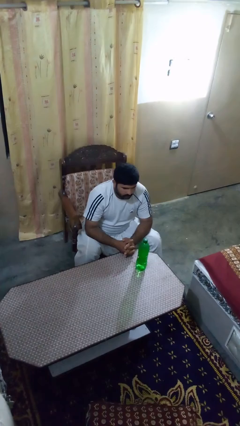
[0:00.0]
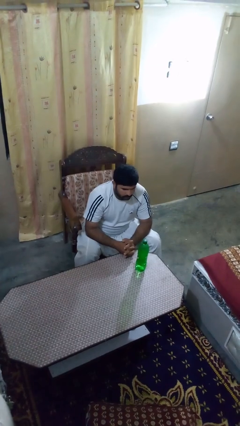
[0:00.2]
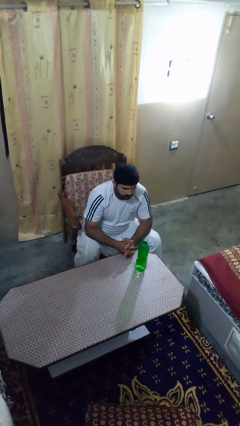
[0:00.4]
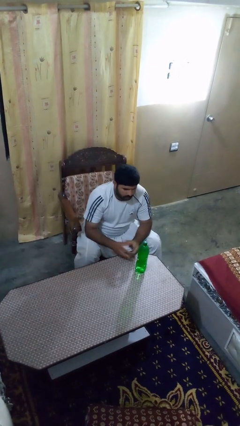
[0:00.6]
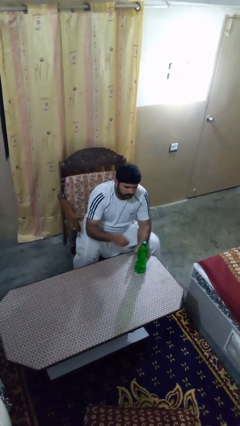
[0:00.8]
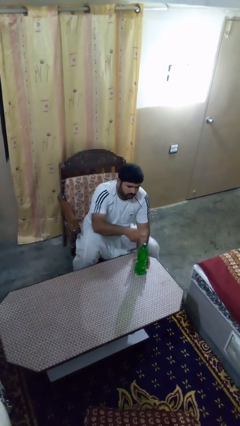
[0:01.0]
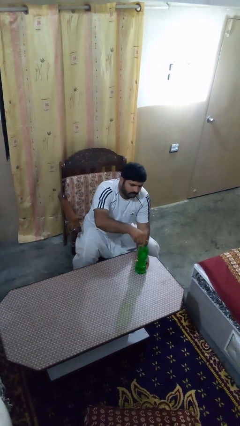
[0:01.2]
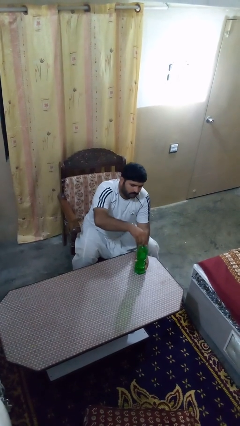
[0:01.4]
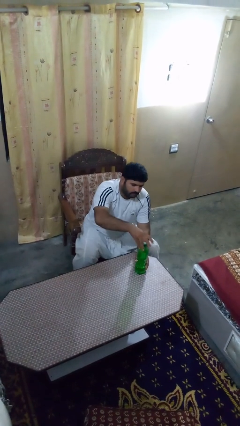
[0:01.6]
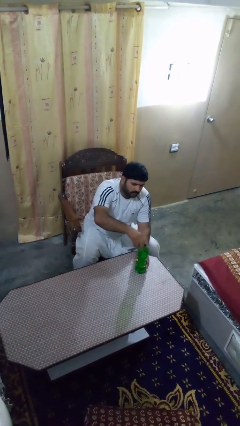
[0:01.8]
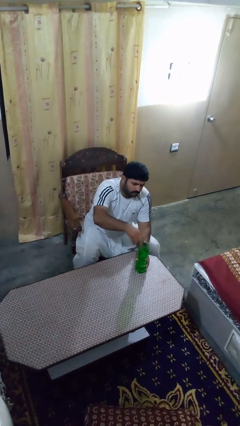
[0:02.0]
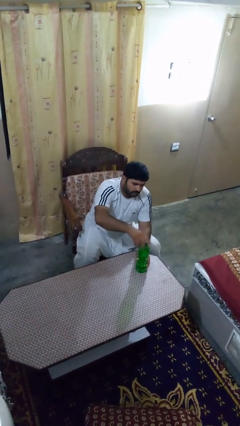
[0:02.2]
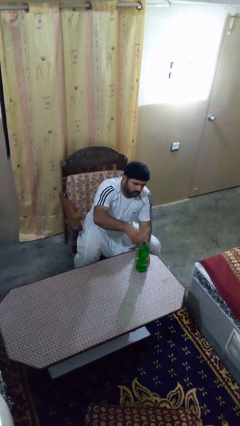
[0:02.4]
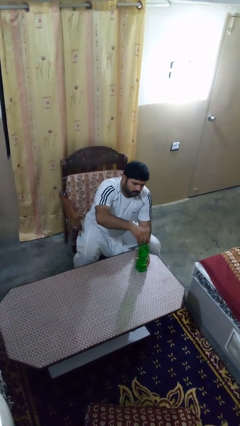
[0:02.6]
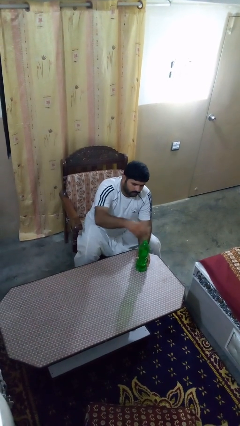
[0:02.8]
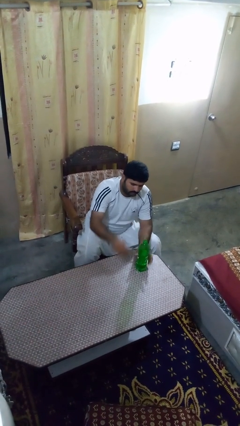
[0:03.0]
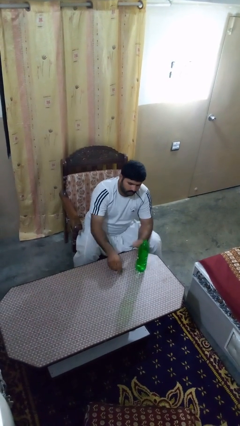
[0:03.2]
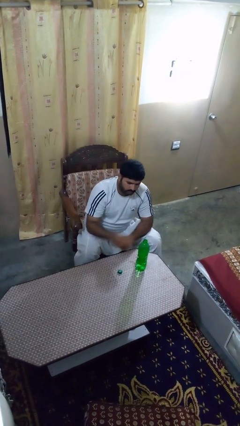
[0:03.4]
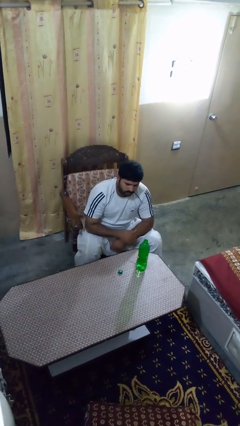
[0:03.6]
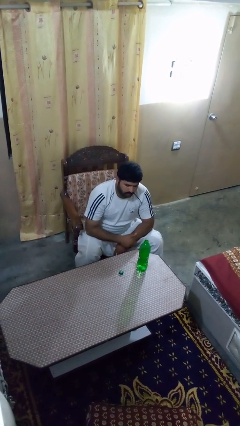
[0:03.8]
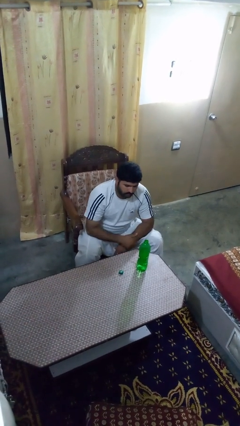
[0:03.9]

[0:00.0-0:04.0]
person unscrews lid from bottle

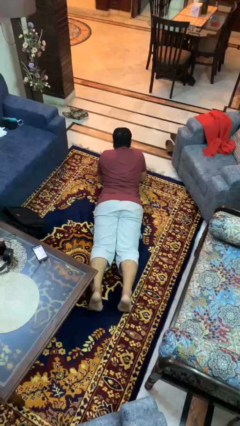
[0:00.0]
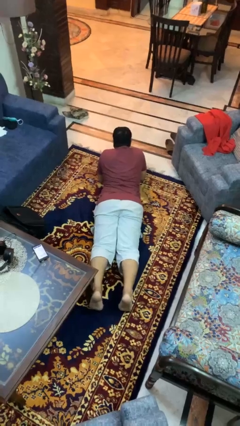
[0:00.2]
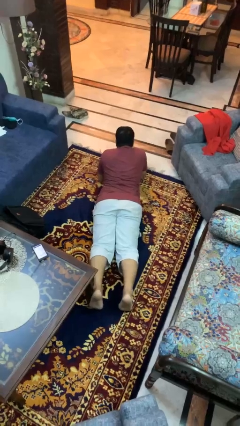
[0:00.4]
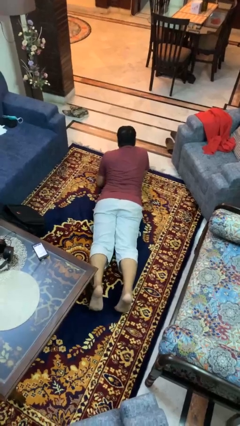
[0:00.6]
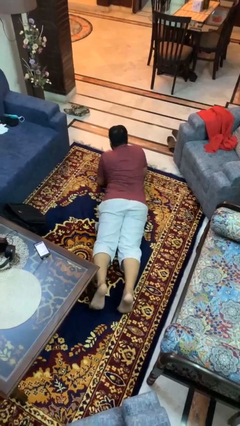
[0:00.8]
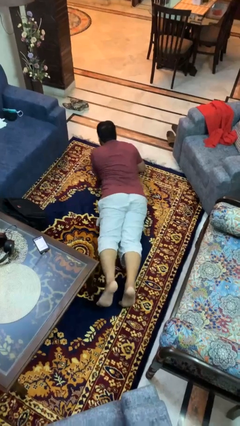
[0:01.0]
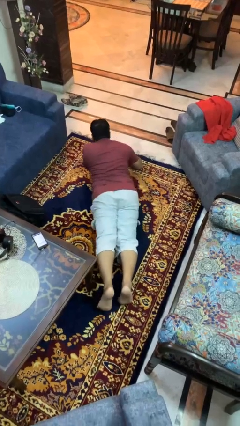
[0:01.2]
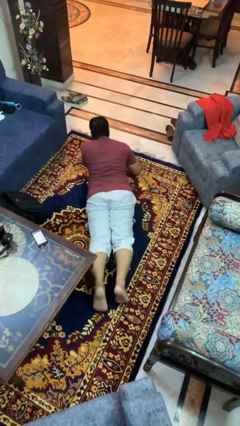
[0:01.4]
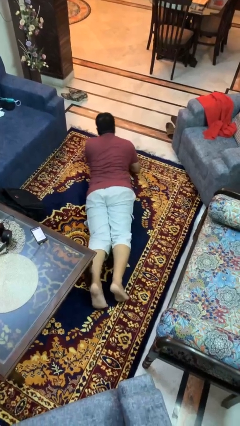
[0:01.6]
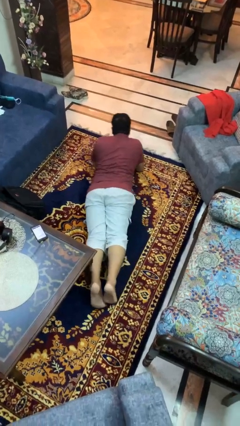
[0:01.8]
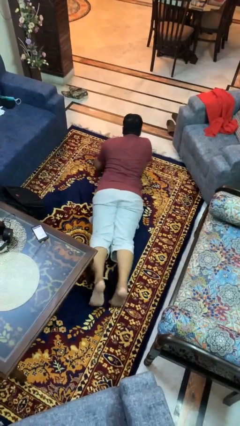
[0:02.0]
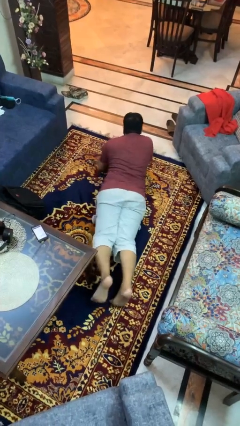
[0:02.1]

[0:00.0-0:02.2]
person crawls

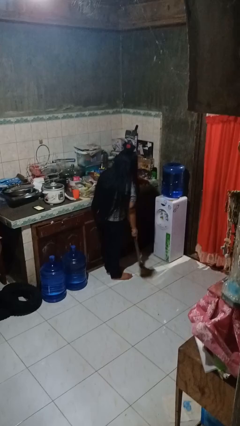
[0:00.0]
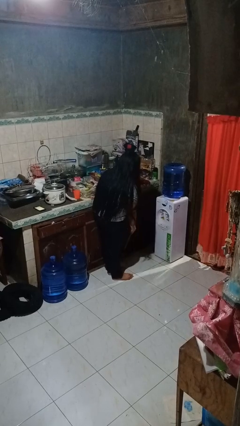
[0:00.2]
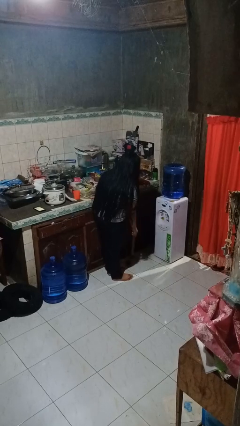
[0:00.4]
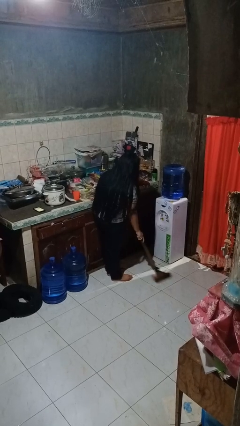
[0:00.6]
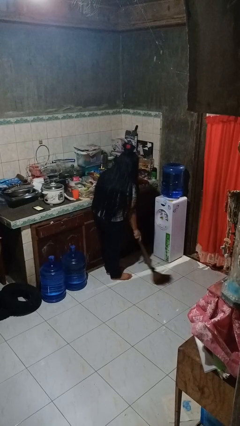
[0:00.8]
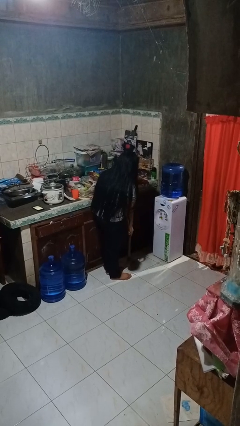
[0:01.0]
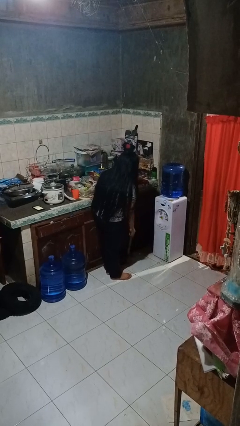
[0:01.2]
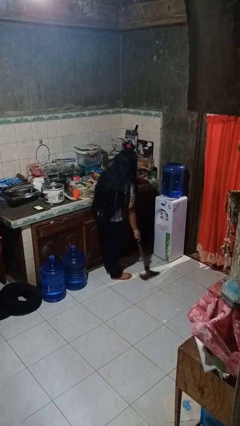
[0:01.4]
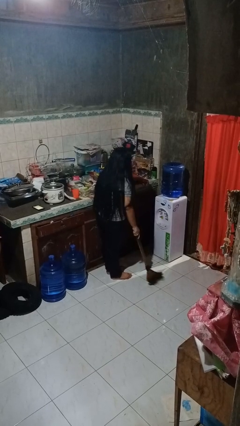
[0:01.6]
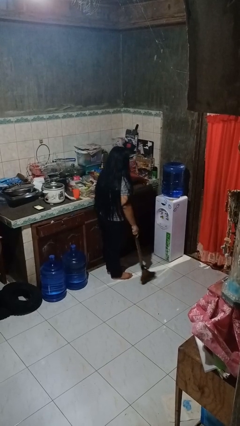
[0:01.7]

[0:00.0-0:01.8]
person sweeps floor

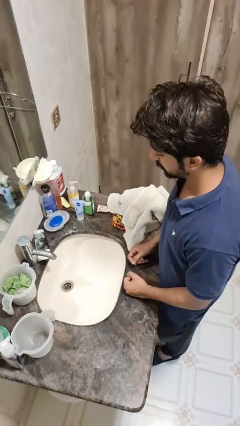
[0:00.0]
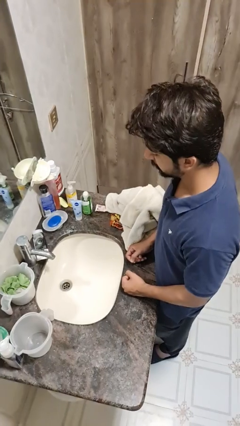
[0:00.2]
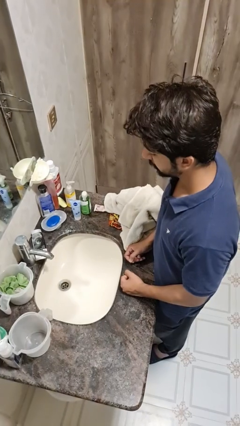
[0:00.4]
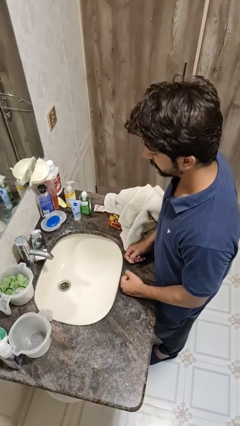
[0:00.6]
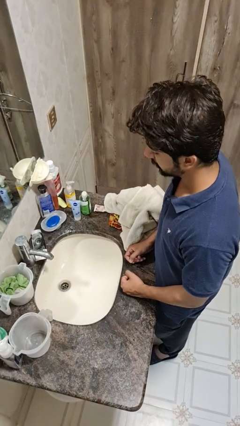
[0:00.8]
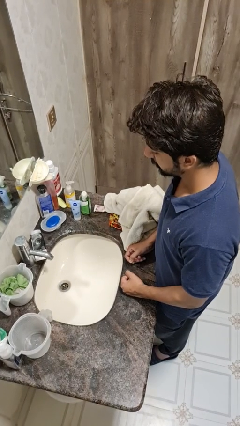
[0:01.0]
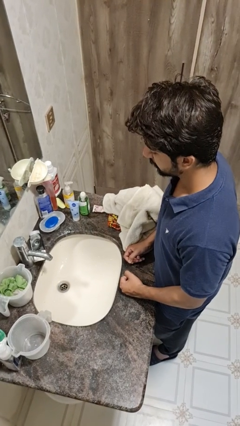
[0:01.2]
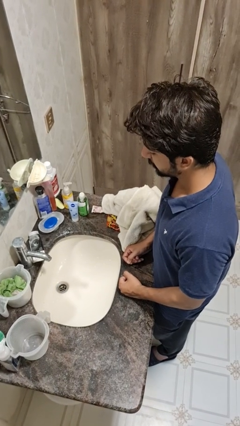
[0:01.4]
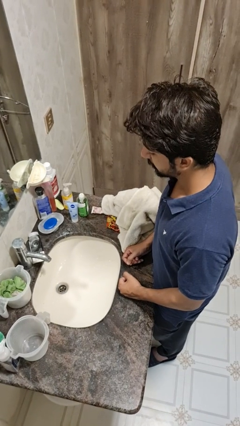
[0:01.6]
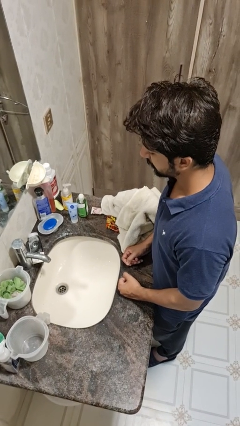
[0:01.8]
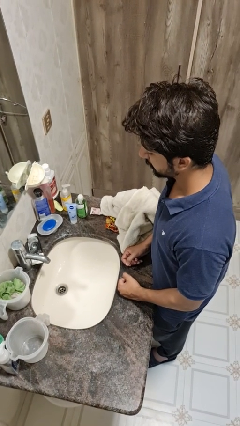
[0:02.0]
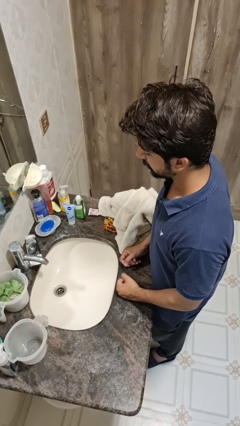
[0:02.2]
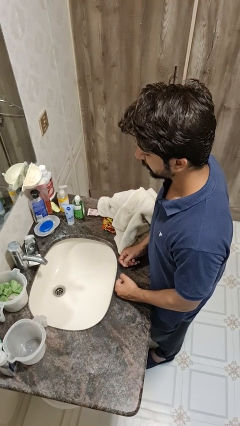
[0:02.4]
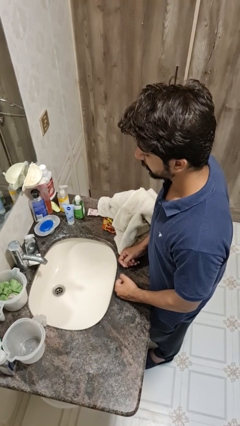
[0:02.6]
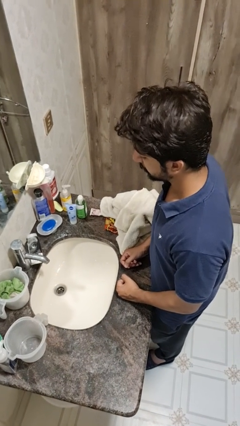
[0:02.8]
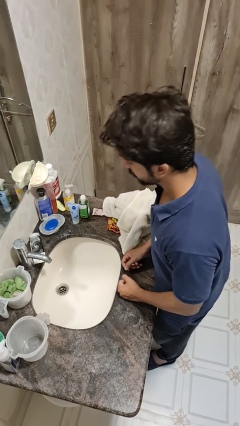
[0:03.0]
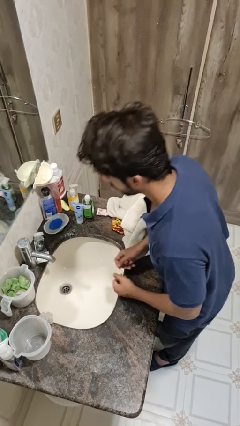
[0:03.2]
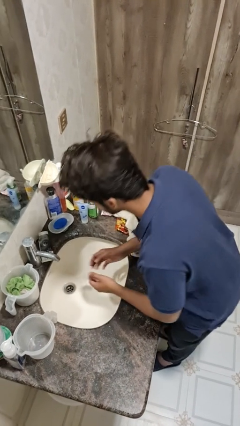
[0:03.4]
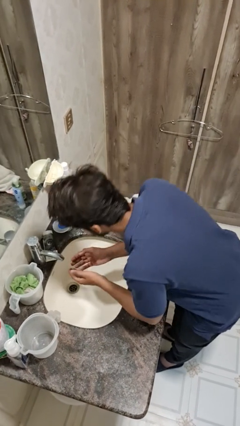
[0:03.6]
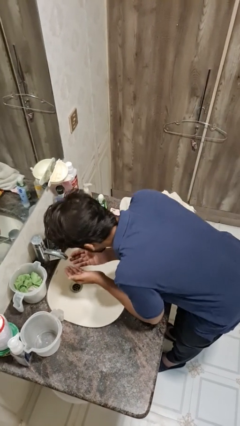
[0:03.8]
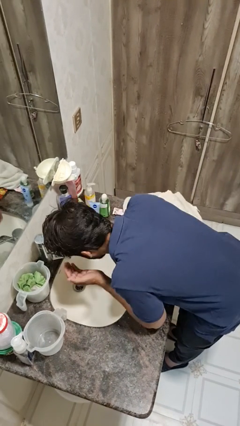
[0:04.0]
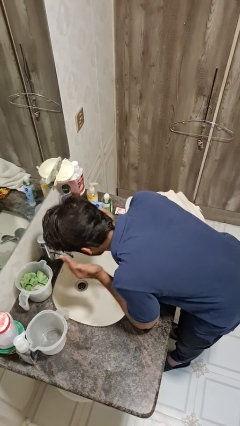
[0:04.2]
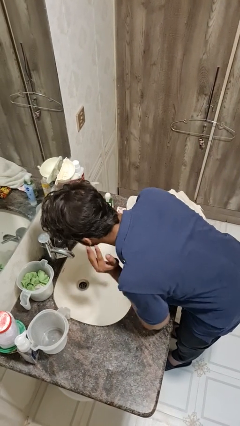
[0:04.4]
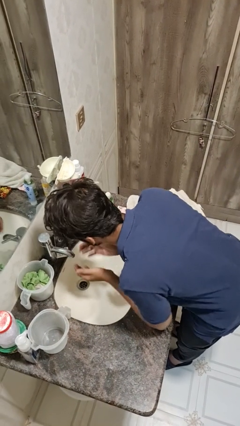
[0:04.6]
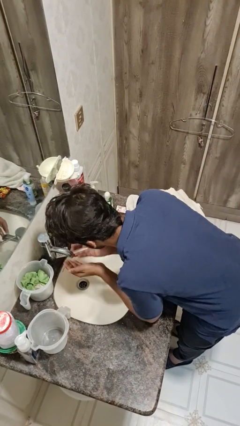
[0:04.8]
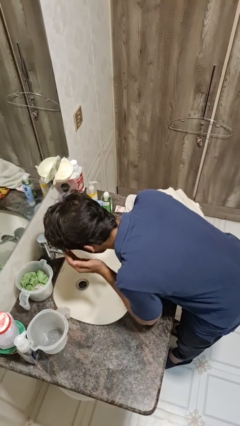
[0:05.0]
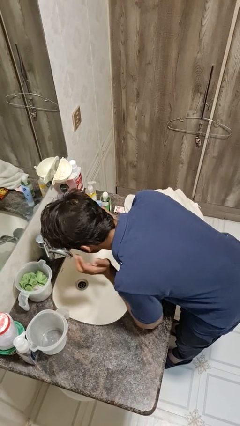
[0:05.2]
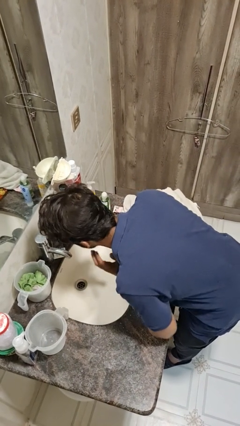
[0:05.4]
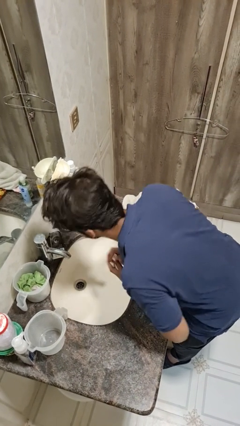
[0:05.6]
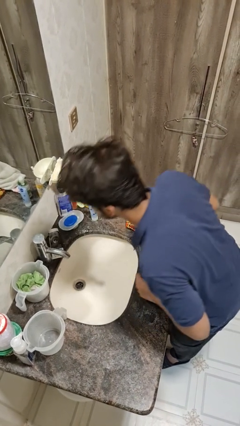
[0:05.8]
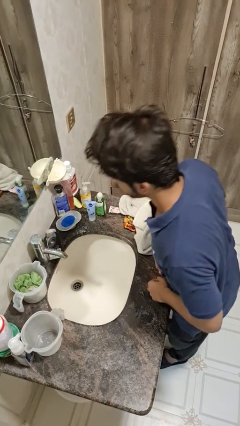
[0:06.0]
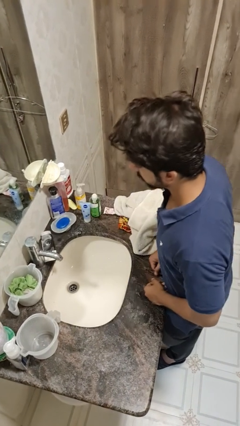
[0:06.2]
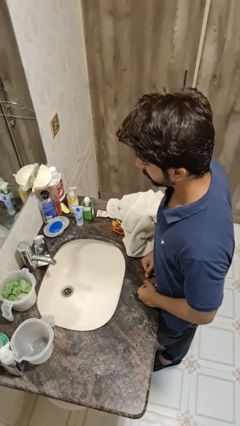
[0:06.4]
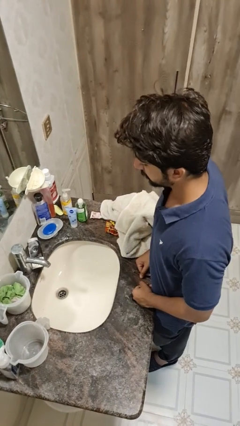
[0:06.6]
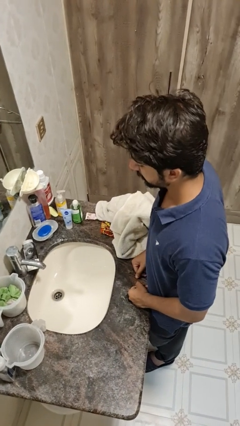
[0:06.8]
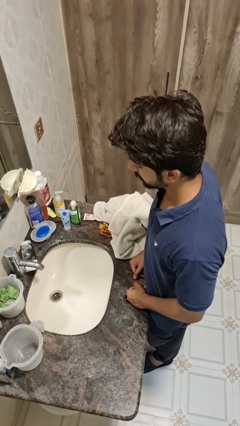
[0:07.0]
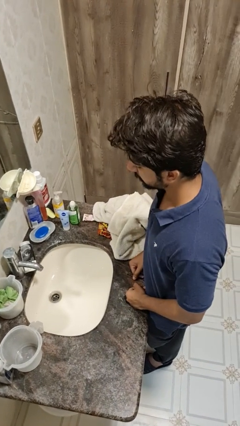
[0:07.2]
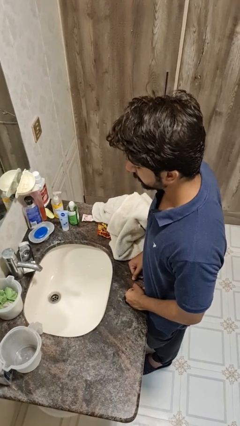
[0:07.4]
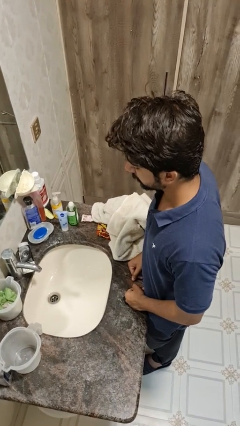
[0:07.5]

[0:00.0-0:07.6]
person washes face

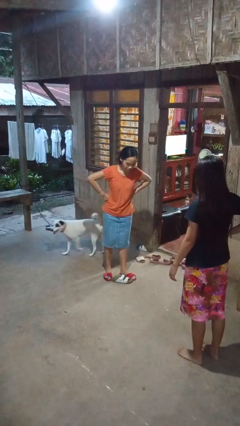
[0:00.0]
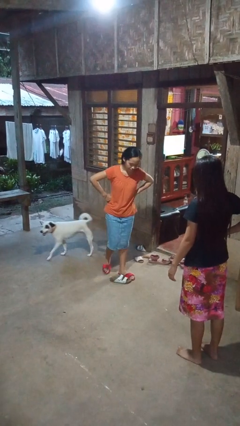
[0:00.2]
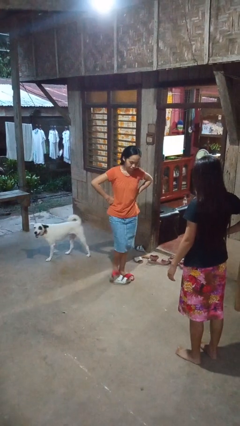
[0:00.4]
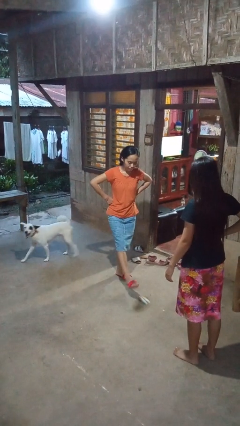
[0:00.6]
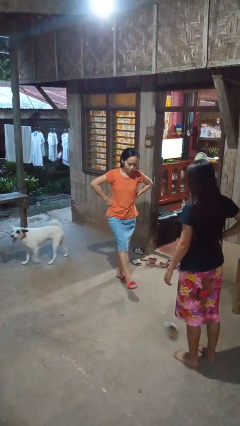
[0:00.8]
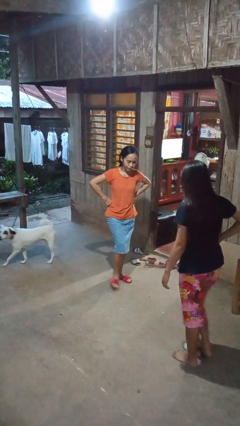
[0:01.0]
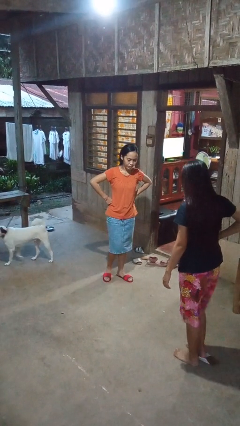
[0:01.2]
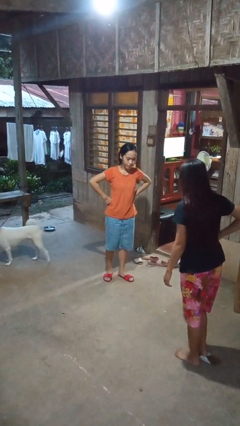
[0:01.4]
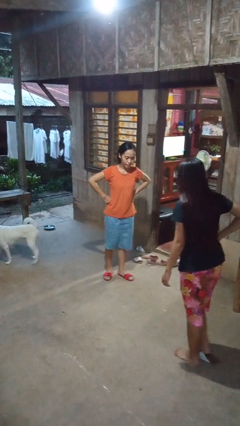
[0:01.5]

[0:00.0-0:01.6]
person kicks object to person

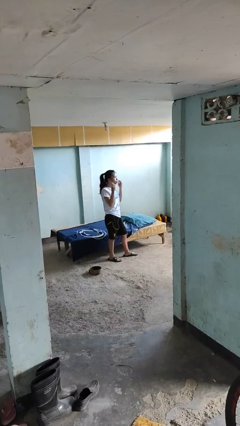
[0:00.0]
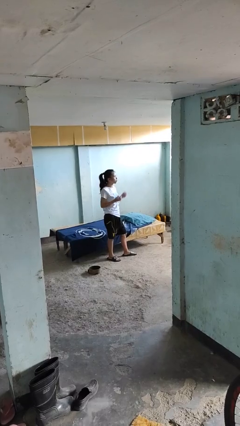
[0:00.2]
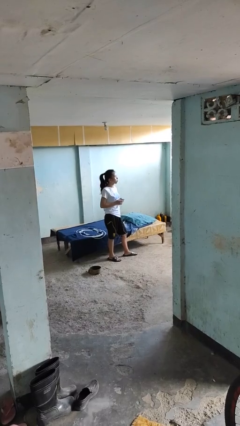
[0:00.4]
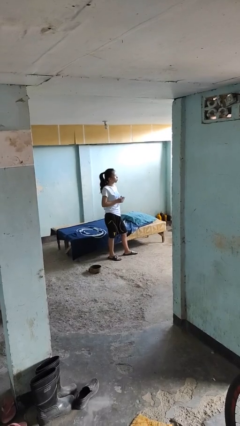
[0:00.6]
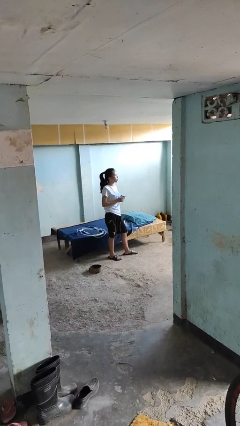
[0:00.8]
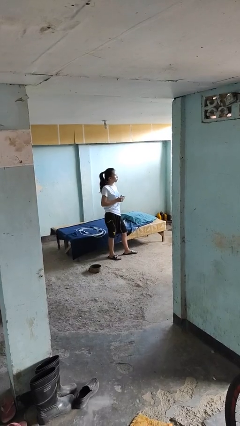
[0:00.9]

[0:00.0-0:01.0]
person takes off headphones
